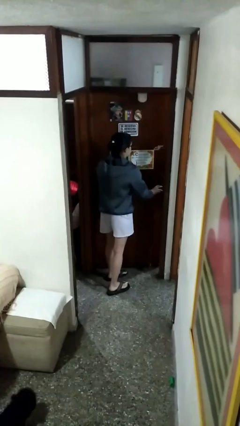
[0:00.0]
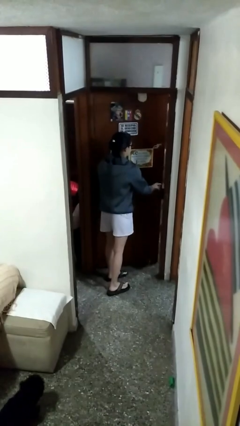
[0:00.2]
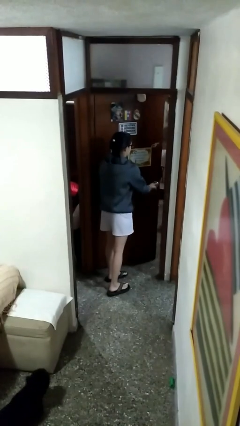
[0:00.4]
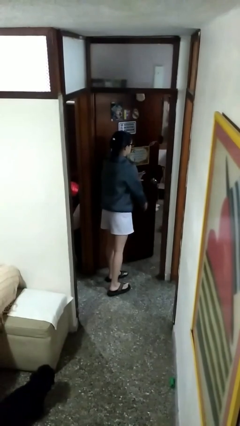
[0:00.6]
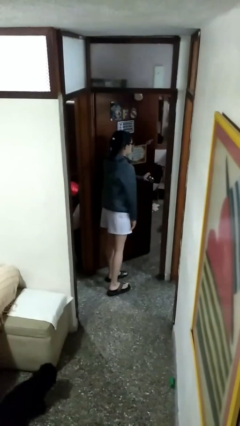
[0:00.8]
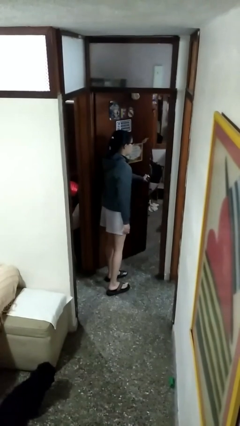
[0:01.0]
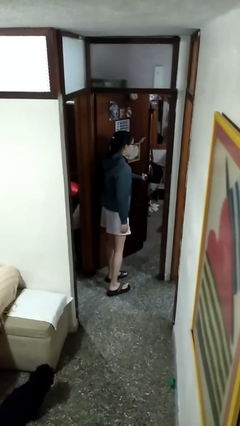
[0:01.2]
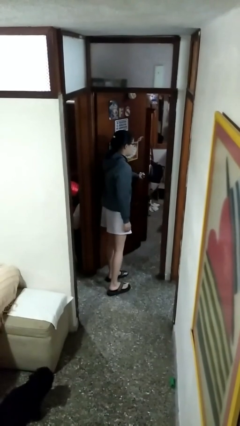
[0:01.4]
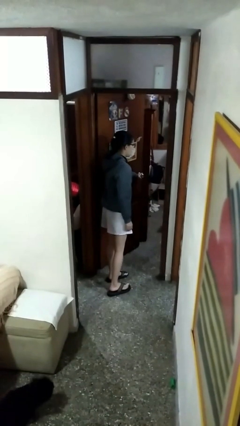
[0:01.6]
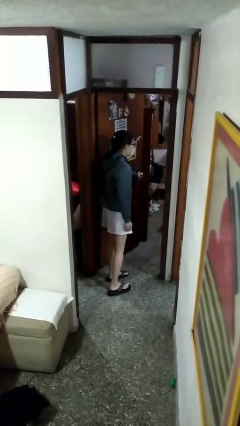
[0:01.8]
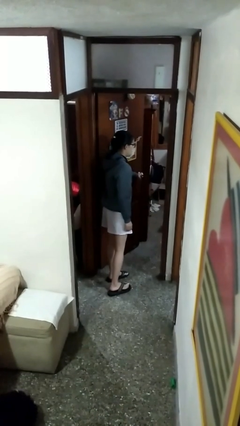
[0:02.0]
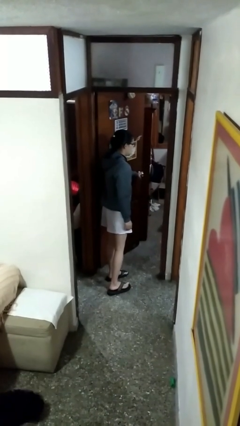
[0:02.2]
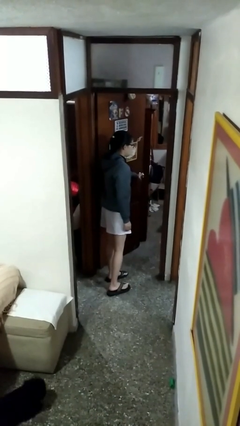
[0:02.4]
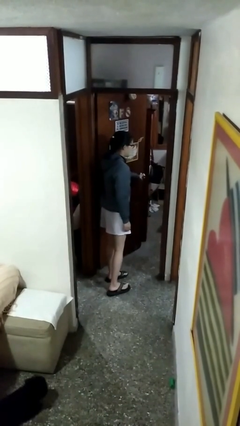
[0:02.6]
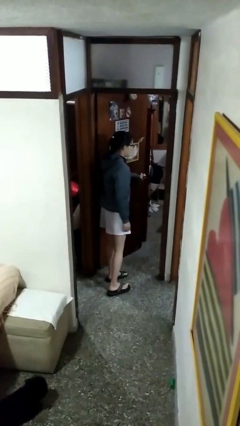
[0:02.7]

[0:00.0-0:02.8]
person opens facility door

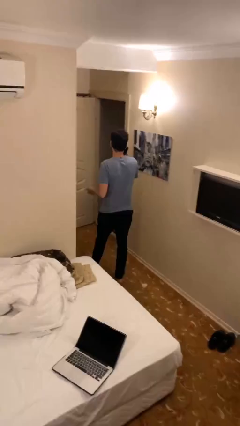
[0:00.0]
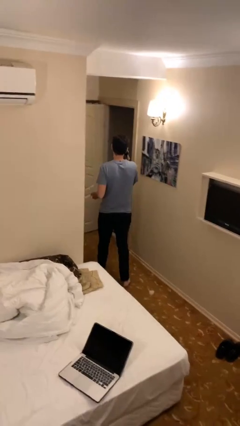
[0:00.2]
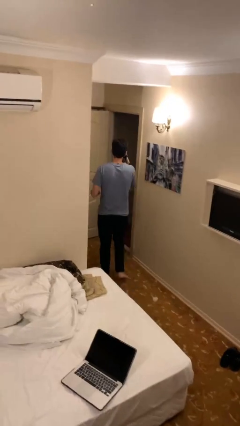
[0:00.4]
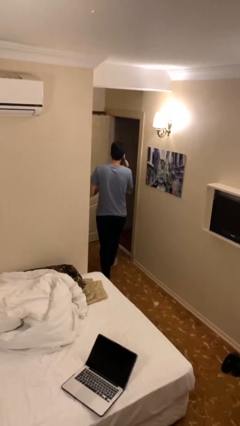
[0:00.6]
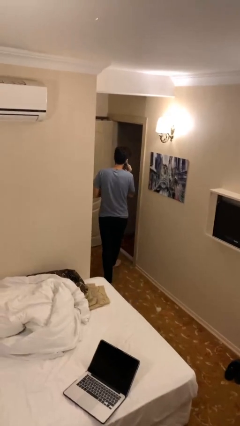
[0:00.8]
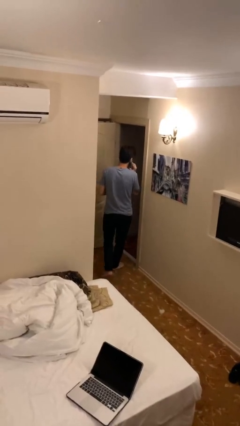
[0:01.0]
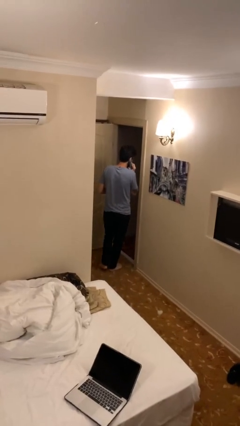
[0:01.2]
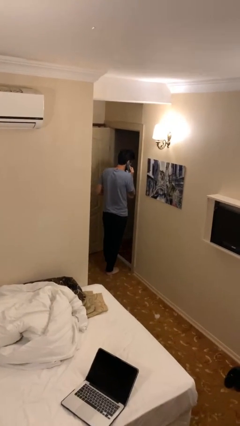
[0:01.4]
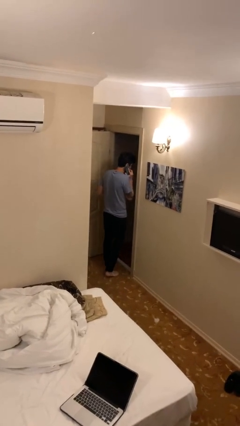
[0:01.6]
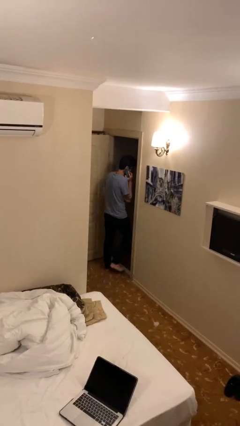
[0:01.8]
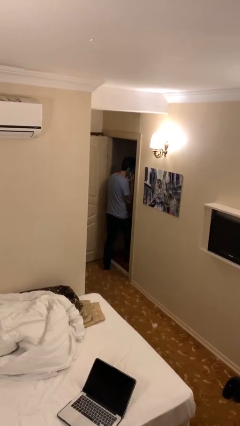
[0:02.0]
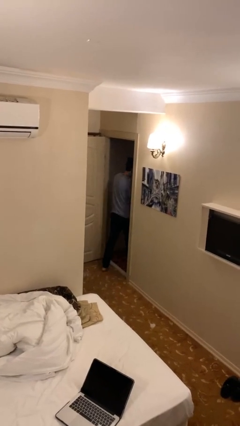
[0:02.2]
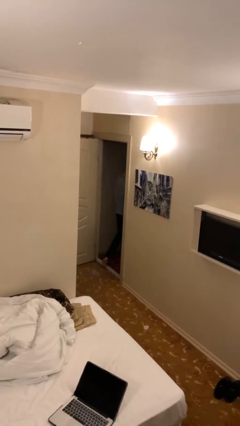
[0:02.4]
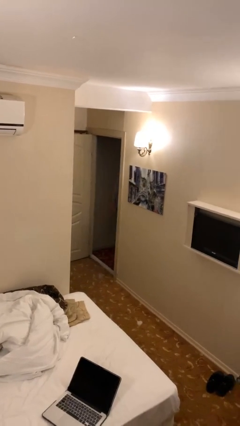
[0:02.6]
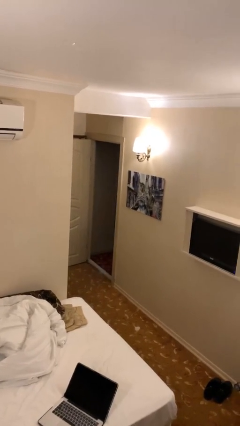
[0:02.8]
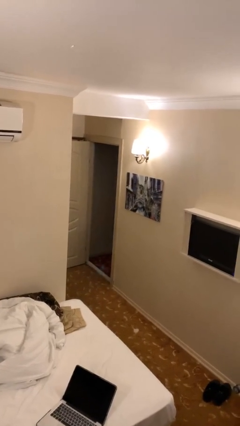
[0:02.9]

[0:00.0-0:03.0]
person exits scene through structure

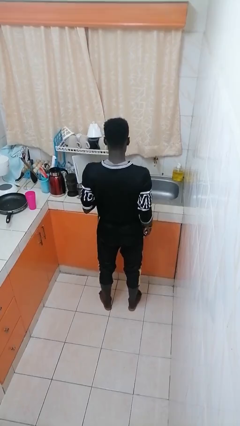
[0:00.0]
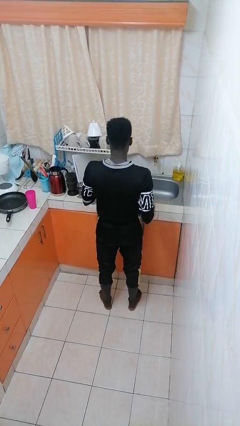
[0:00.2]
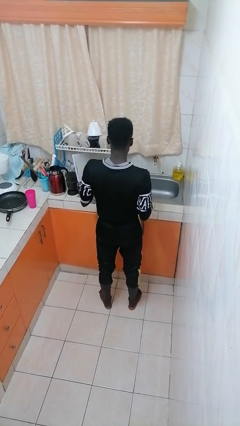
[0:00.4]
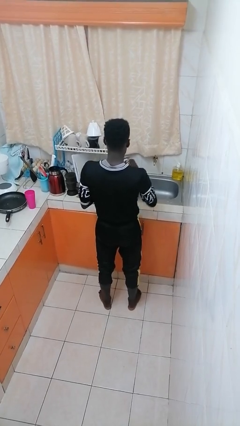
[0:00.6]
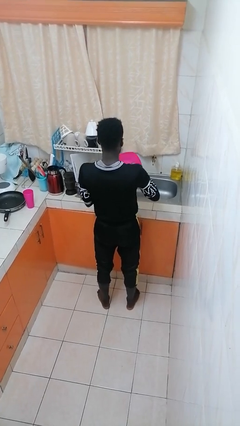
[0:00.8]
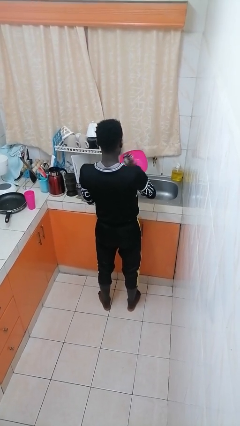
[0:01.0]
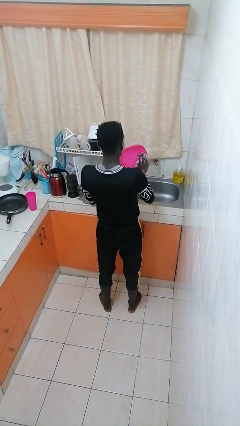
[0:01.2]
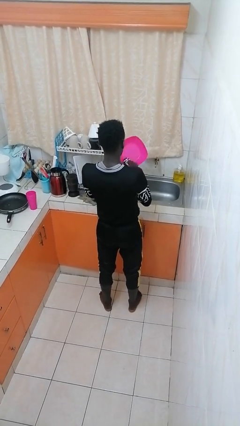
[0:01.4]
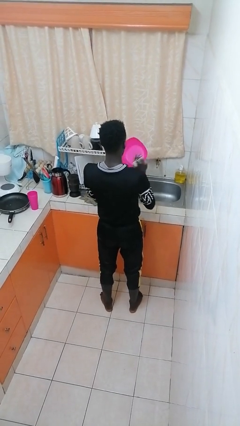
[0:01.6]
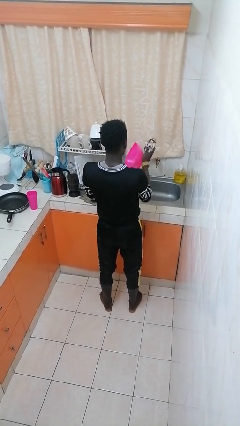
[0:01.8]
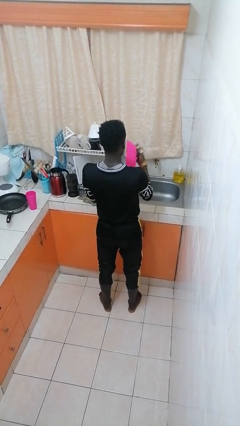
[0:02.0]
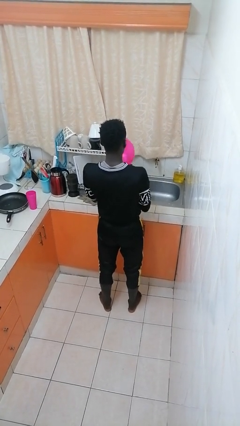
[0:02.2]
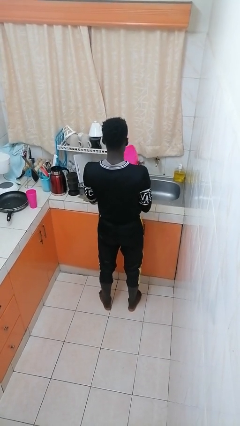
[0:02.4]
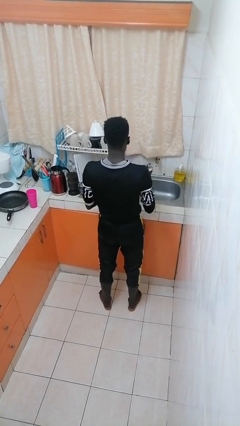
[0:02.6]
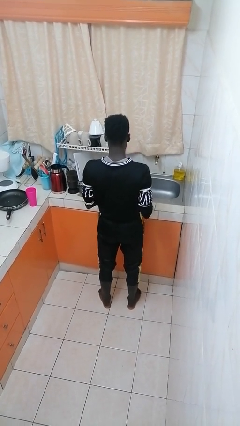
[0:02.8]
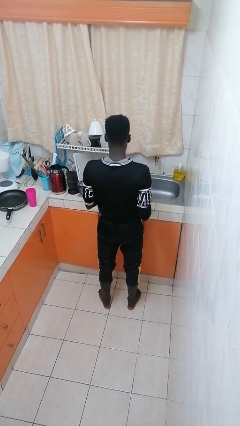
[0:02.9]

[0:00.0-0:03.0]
person dries dish

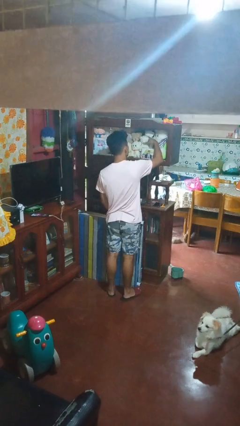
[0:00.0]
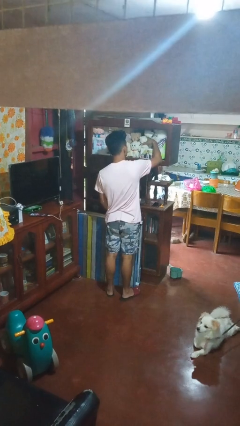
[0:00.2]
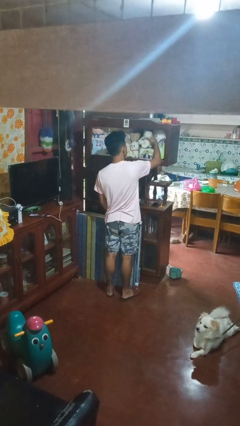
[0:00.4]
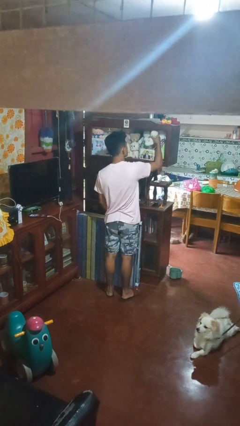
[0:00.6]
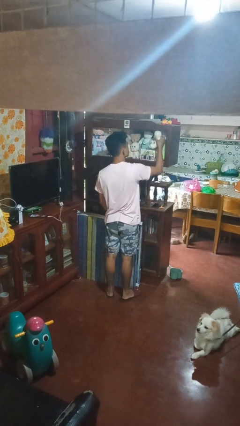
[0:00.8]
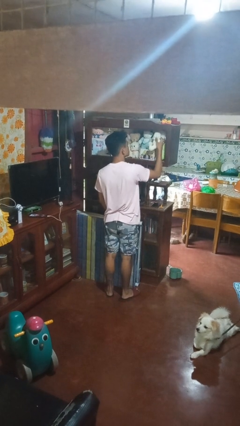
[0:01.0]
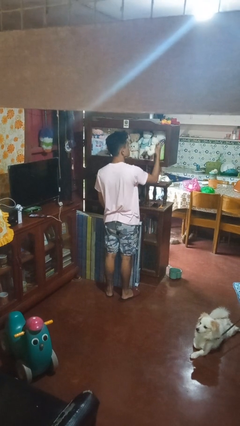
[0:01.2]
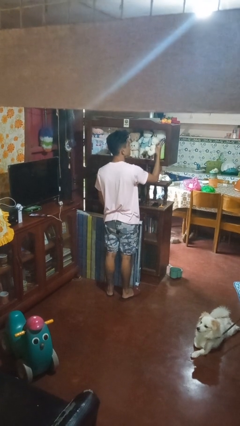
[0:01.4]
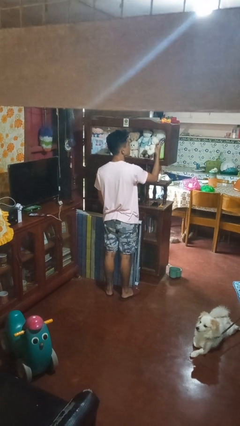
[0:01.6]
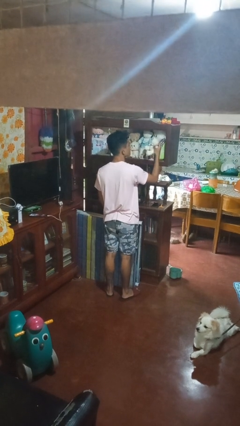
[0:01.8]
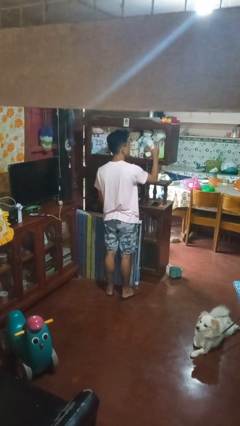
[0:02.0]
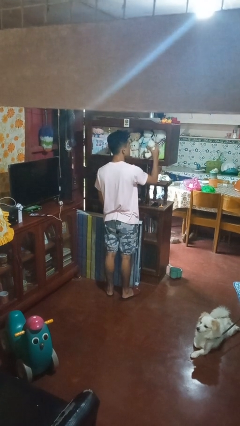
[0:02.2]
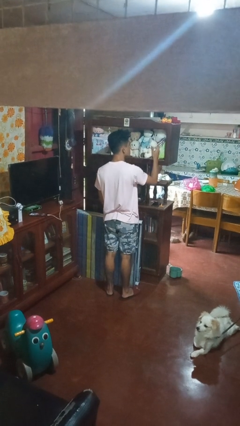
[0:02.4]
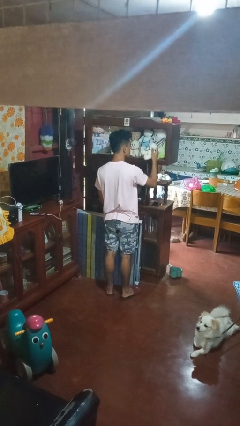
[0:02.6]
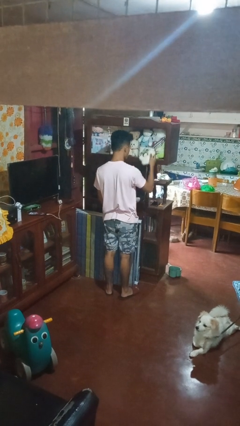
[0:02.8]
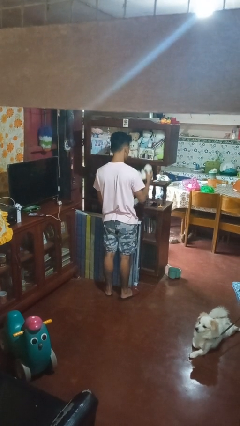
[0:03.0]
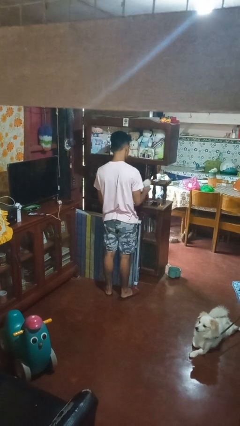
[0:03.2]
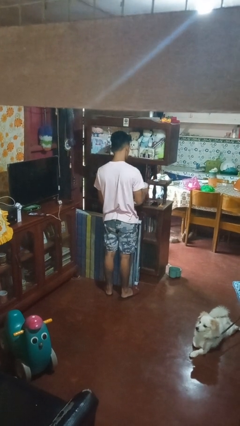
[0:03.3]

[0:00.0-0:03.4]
person picks up object from shelf

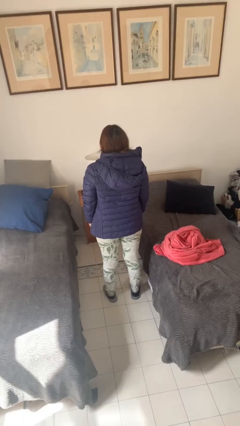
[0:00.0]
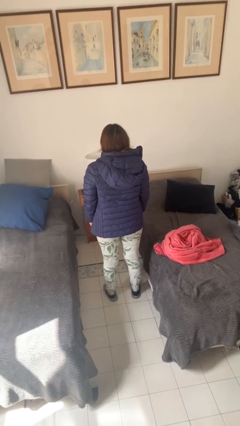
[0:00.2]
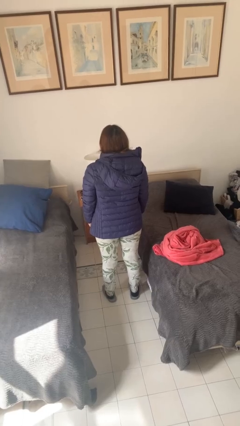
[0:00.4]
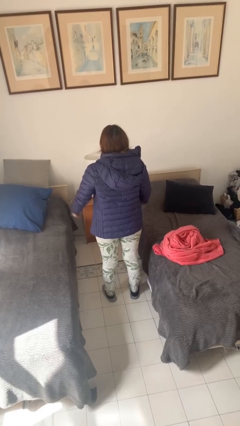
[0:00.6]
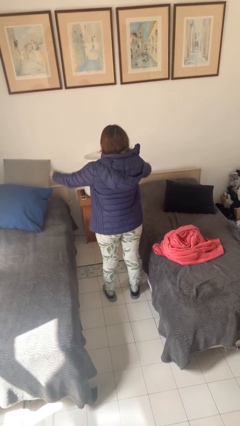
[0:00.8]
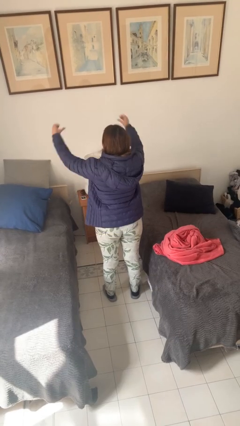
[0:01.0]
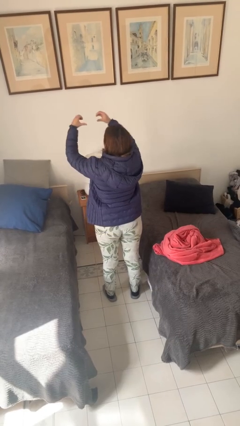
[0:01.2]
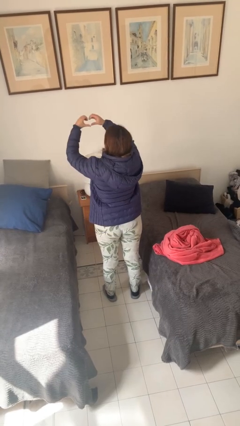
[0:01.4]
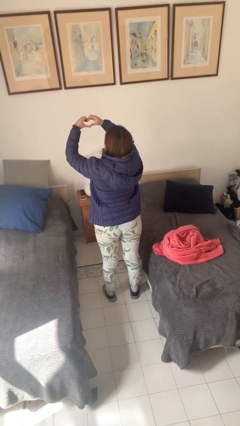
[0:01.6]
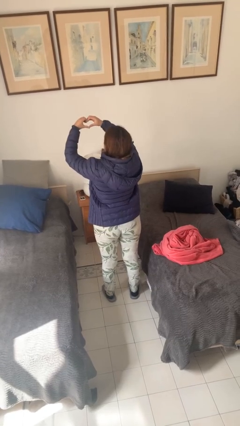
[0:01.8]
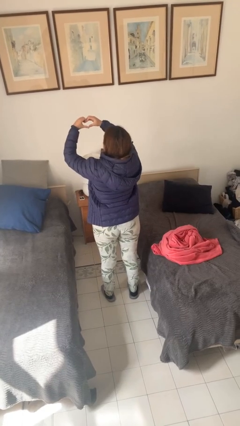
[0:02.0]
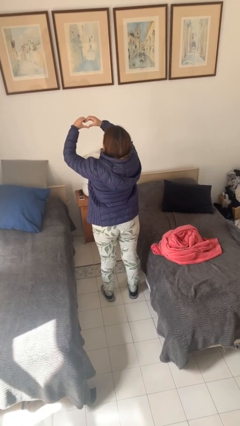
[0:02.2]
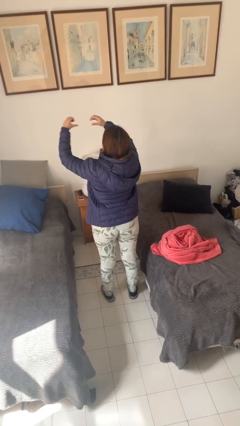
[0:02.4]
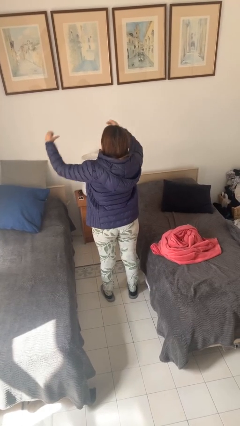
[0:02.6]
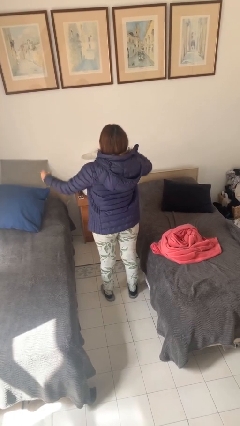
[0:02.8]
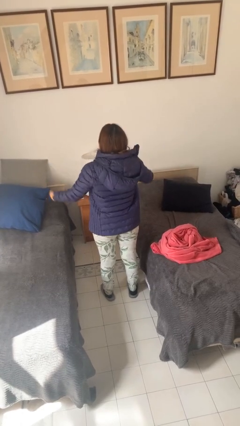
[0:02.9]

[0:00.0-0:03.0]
person gestures heart

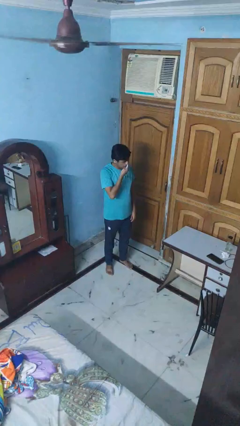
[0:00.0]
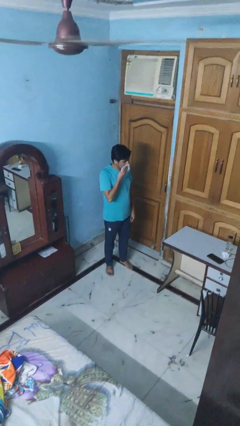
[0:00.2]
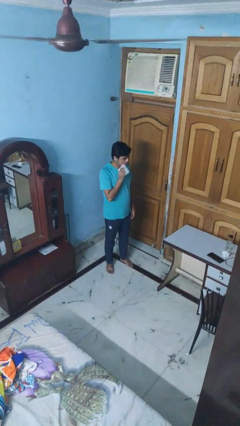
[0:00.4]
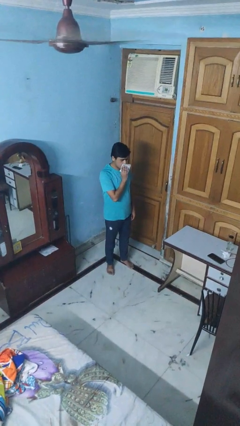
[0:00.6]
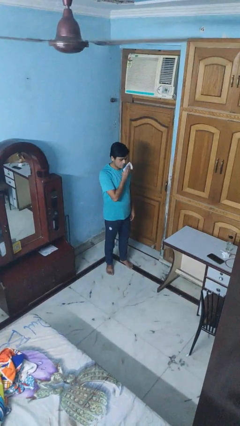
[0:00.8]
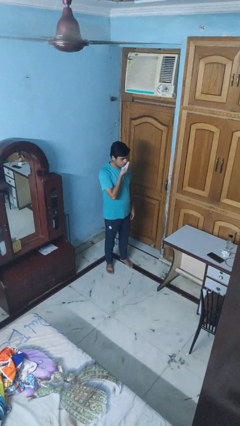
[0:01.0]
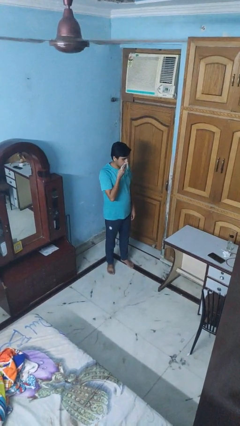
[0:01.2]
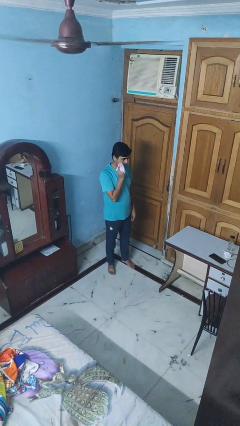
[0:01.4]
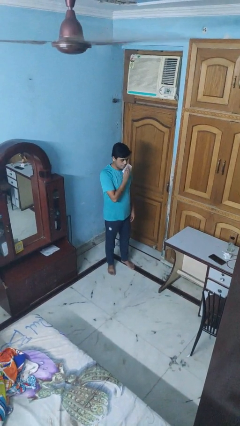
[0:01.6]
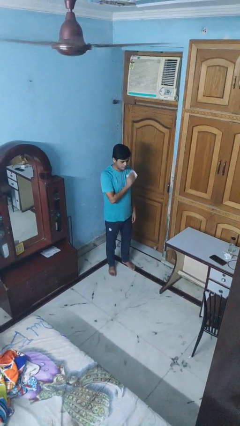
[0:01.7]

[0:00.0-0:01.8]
person wipes mouth with napkin
